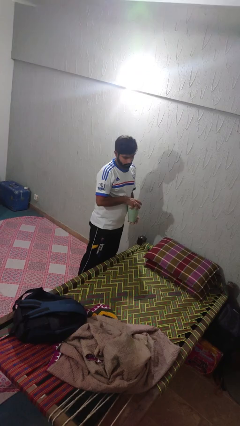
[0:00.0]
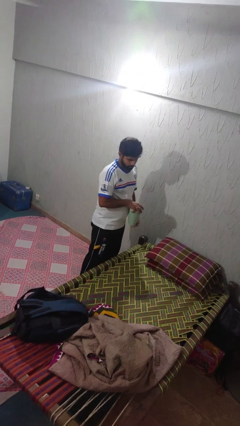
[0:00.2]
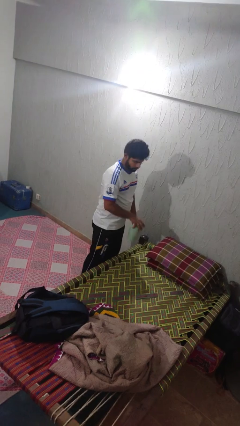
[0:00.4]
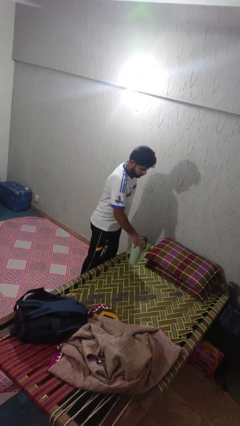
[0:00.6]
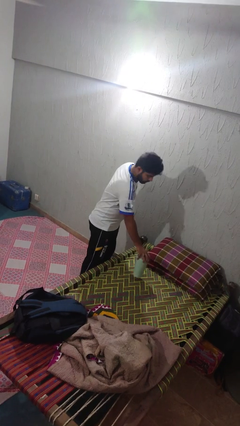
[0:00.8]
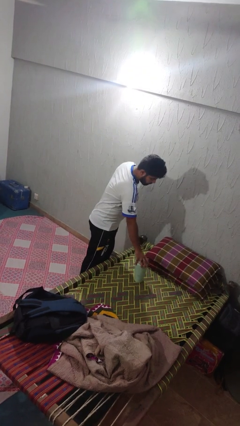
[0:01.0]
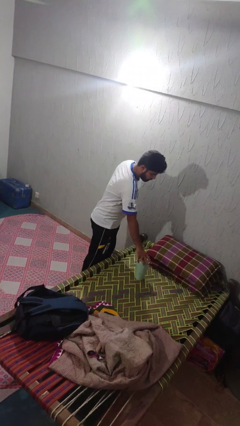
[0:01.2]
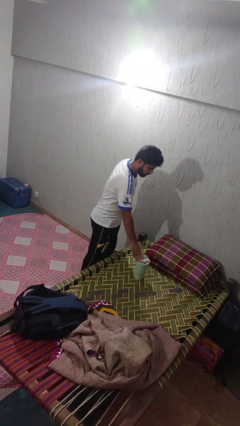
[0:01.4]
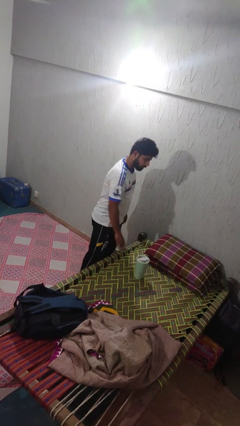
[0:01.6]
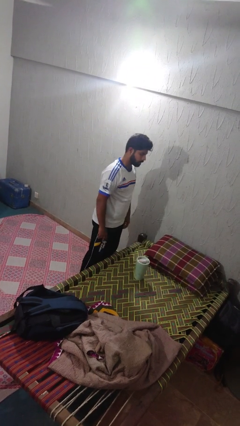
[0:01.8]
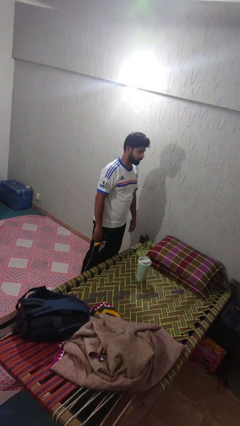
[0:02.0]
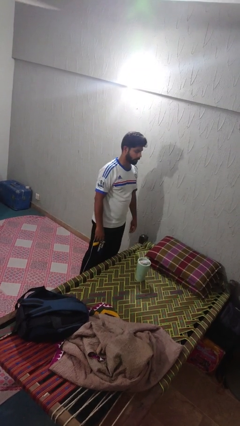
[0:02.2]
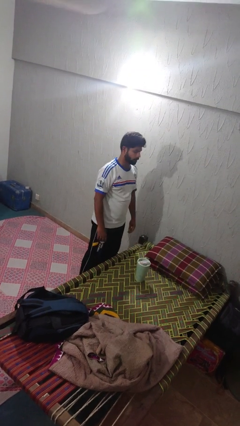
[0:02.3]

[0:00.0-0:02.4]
person puts down object on bed

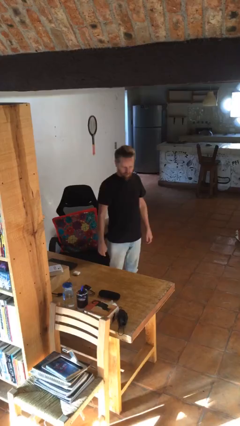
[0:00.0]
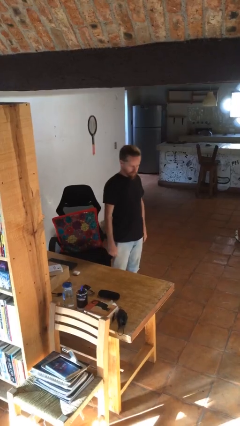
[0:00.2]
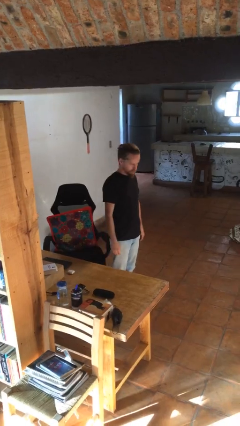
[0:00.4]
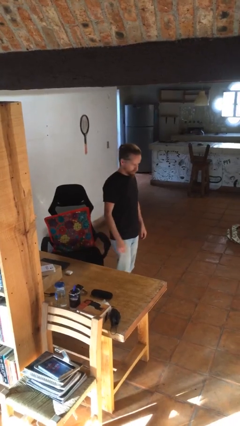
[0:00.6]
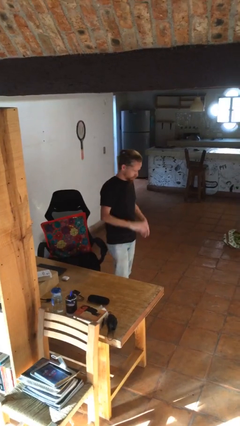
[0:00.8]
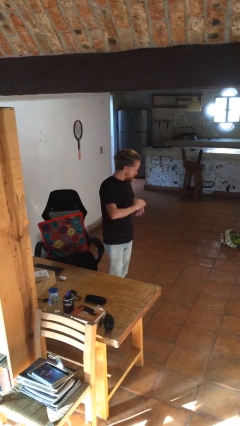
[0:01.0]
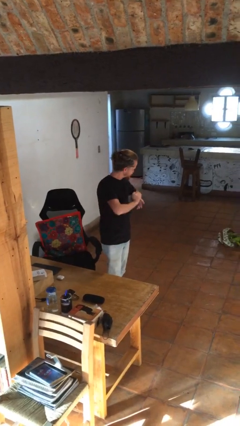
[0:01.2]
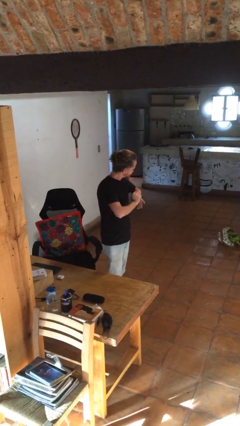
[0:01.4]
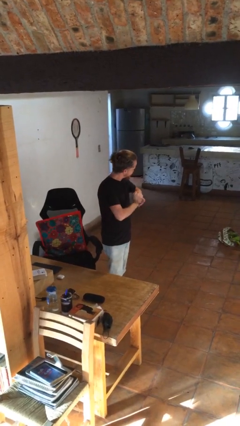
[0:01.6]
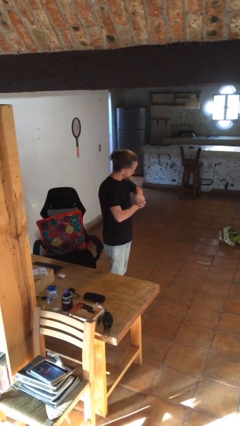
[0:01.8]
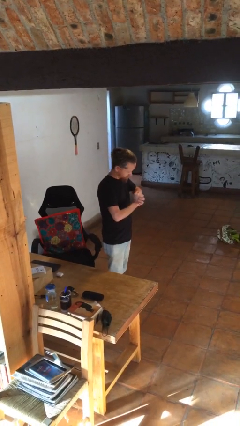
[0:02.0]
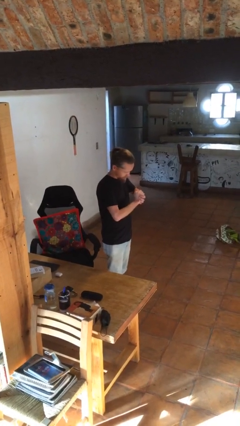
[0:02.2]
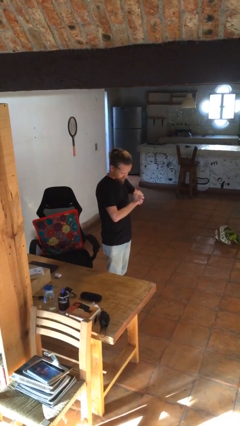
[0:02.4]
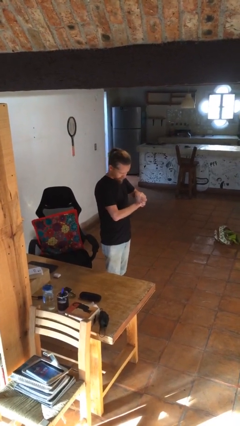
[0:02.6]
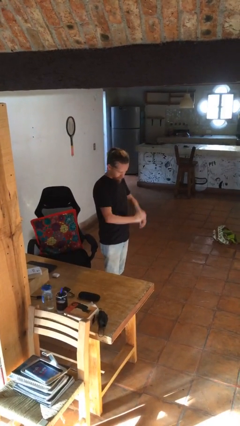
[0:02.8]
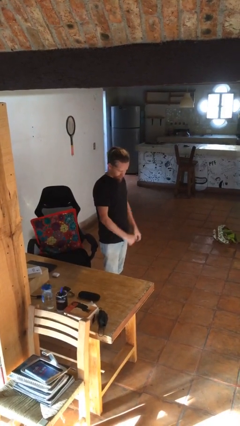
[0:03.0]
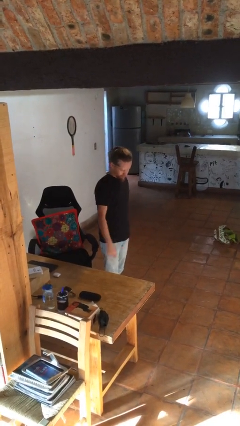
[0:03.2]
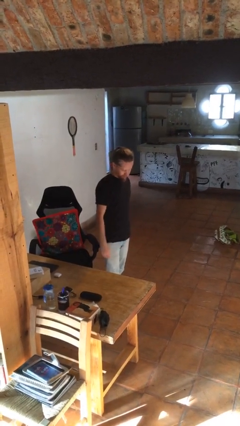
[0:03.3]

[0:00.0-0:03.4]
person cracks knuckles

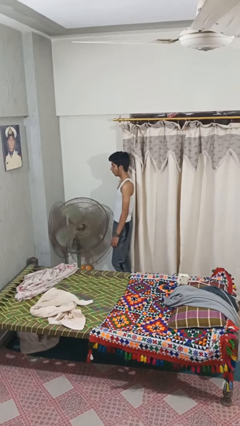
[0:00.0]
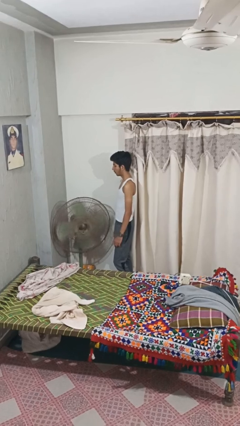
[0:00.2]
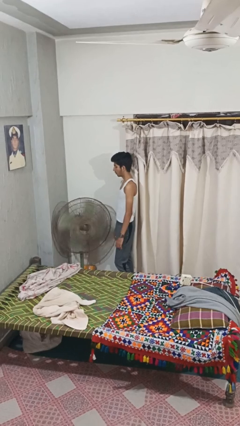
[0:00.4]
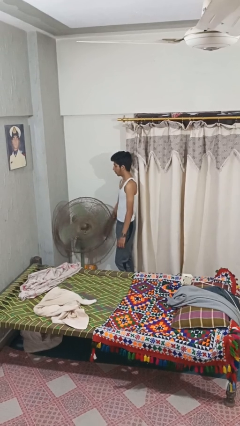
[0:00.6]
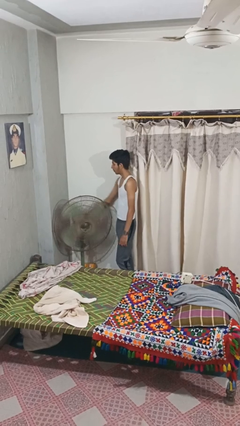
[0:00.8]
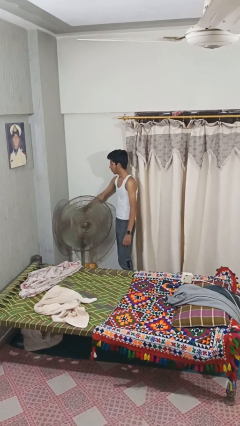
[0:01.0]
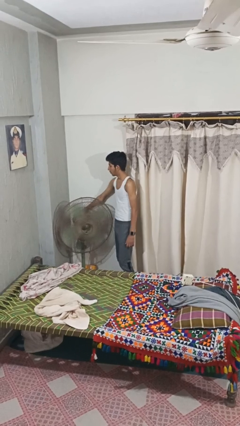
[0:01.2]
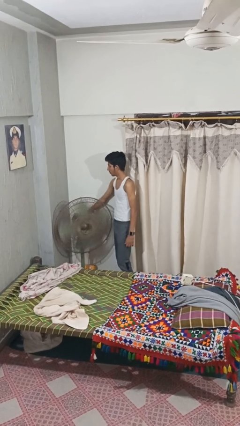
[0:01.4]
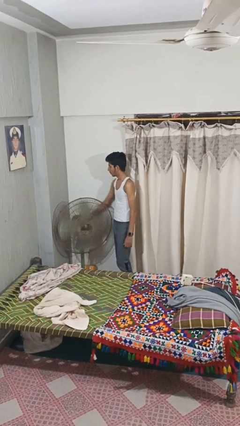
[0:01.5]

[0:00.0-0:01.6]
person turns off fan

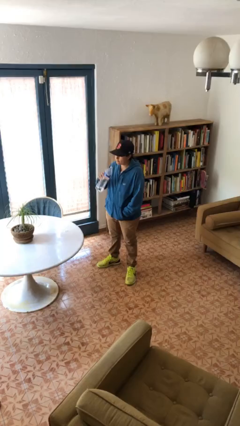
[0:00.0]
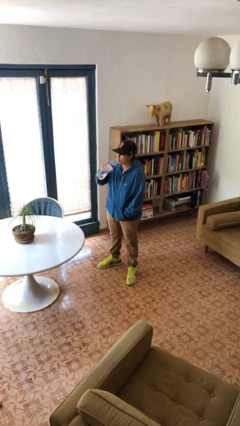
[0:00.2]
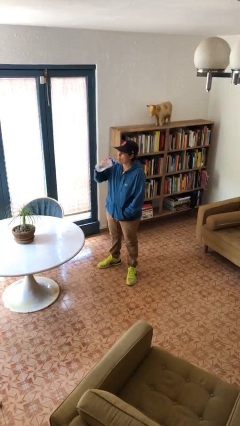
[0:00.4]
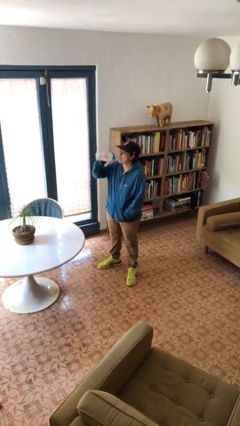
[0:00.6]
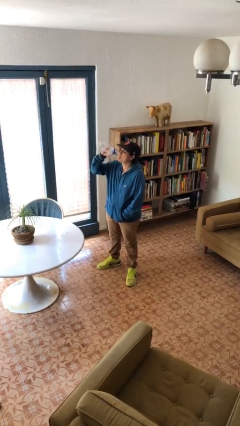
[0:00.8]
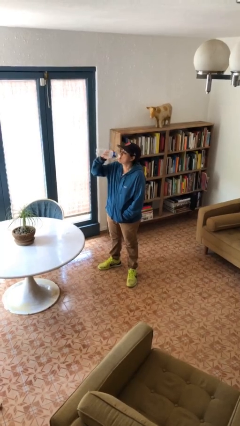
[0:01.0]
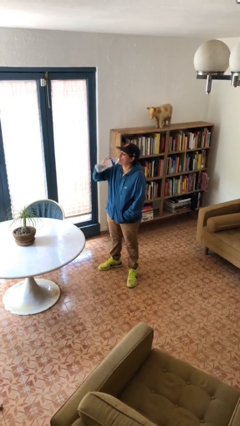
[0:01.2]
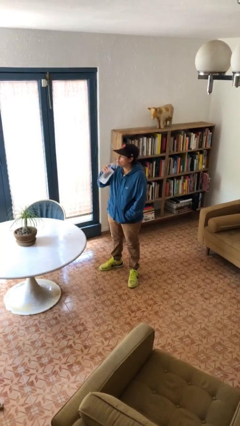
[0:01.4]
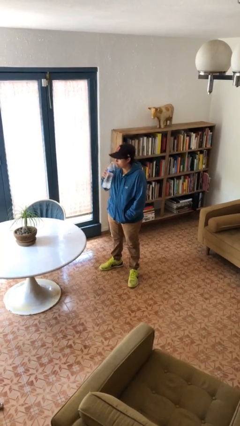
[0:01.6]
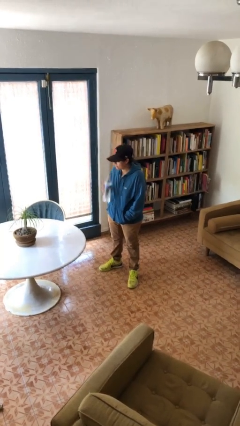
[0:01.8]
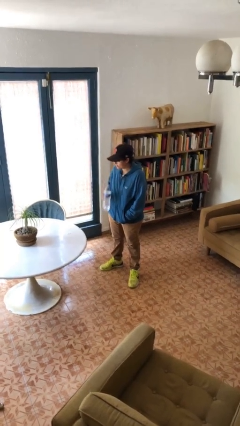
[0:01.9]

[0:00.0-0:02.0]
person drinks from bottle

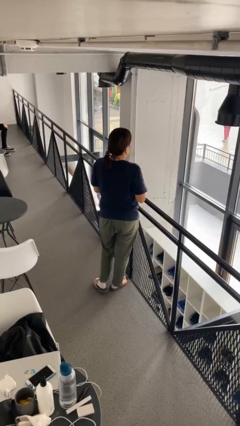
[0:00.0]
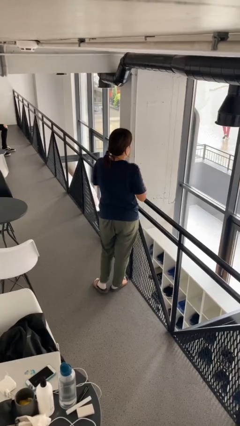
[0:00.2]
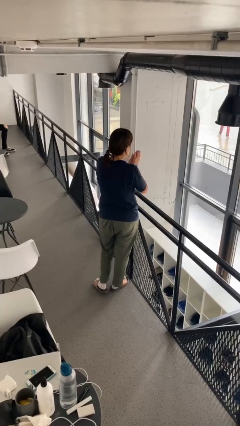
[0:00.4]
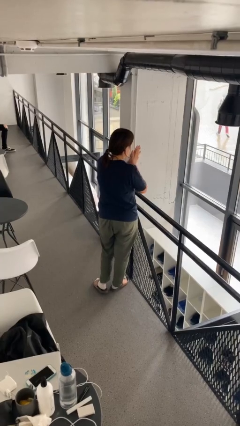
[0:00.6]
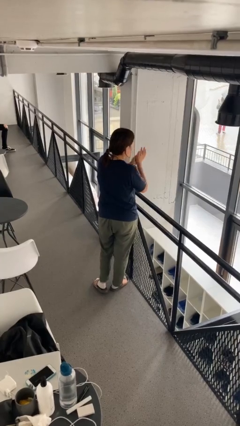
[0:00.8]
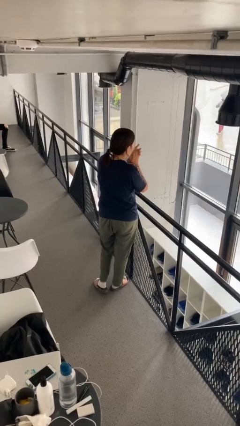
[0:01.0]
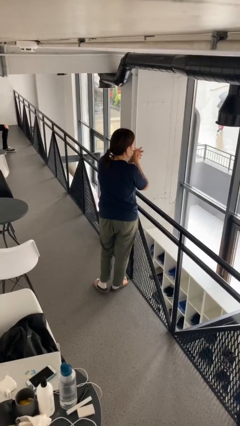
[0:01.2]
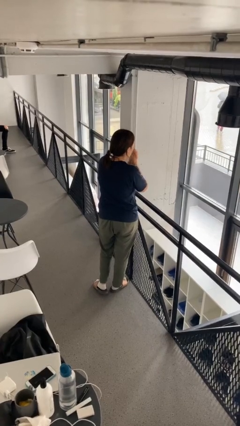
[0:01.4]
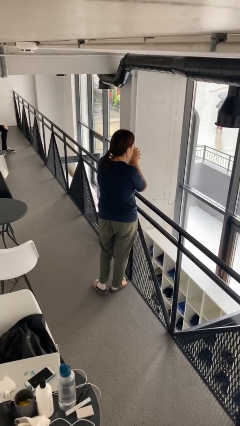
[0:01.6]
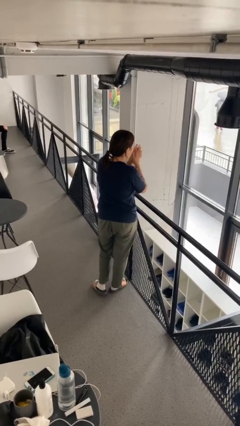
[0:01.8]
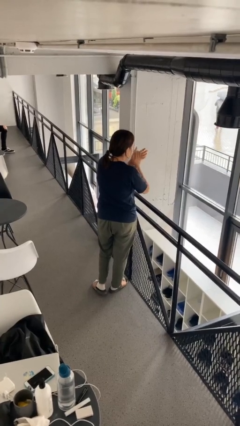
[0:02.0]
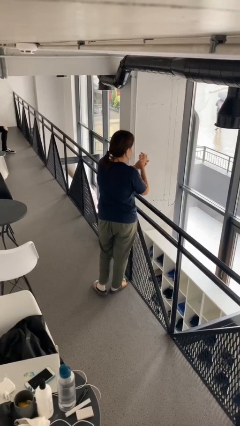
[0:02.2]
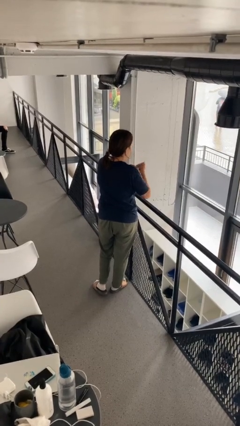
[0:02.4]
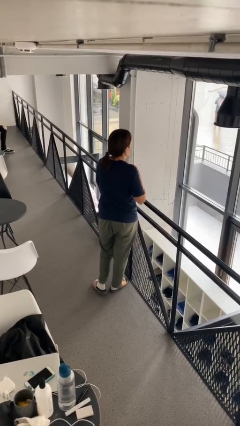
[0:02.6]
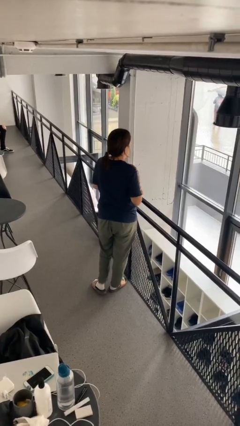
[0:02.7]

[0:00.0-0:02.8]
person blows into hands

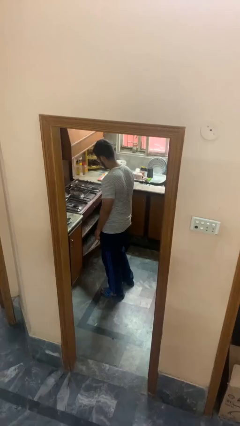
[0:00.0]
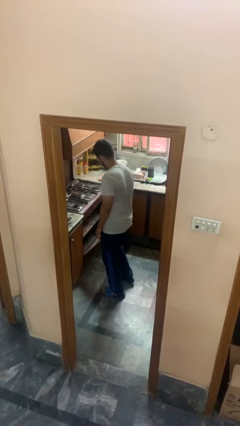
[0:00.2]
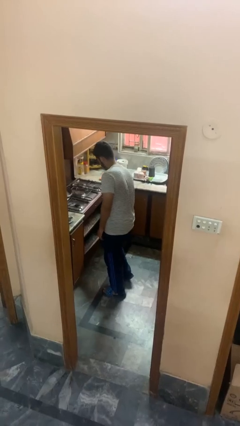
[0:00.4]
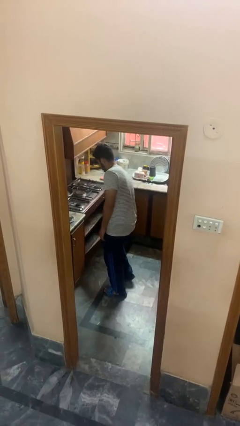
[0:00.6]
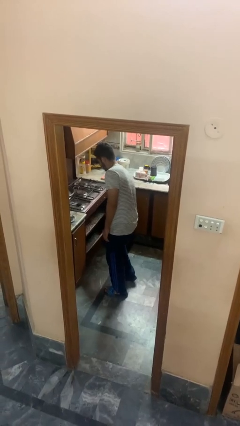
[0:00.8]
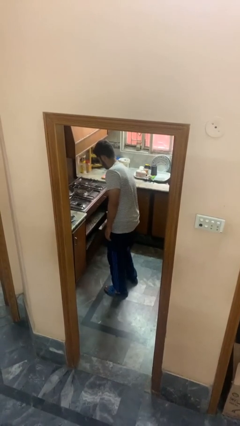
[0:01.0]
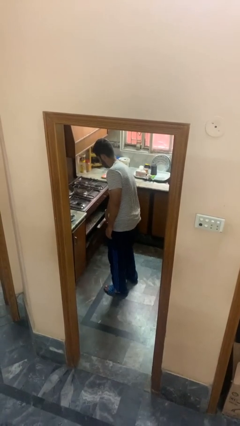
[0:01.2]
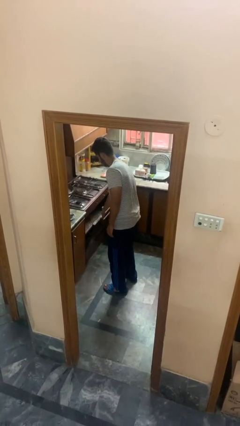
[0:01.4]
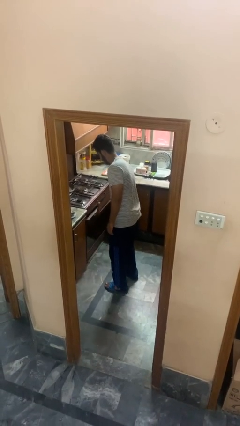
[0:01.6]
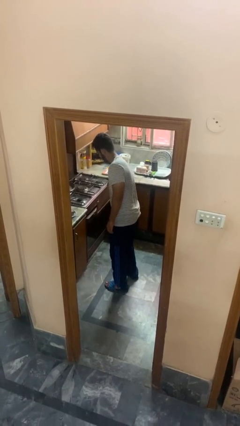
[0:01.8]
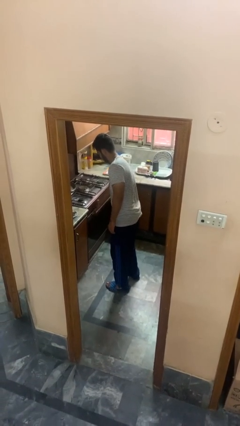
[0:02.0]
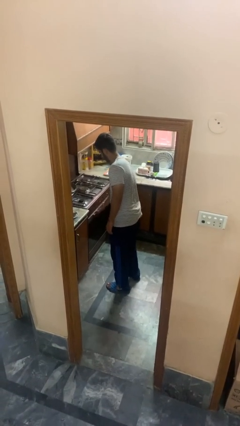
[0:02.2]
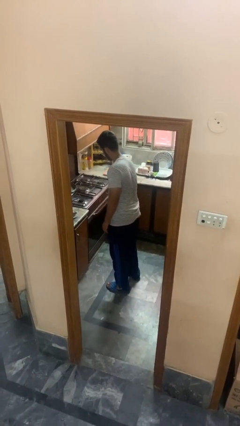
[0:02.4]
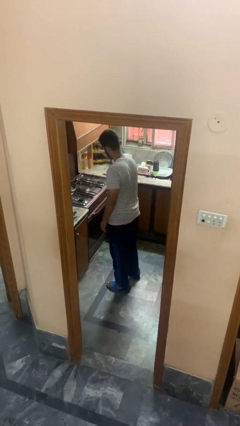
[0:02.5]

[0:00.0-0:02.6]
person closes oven door

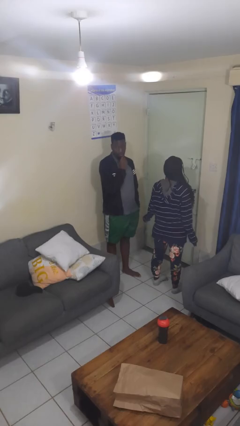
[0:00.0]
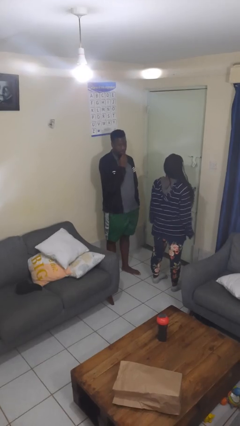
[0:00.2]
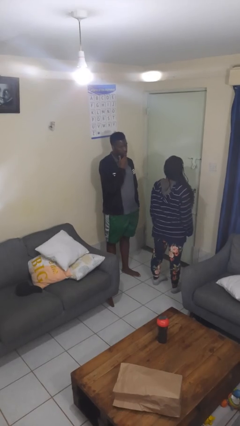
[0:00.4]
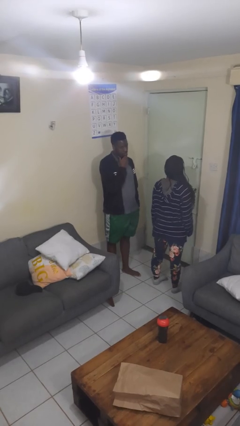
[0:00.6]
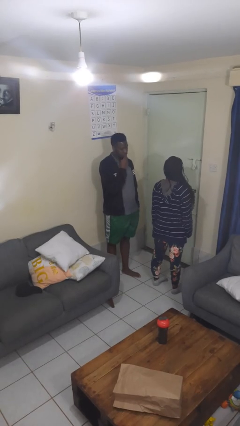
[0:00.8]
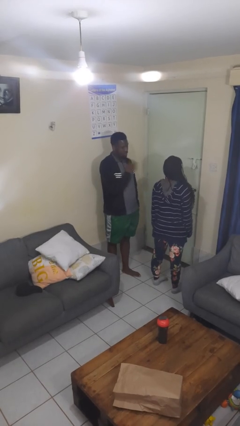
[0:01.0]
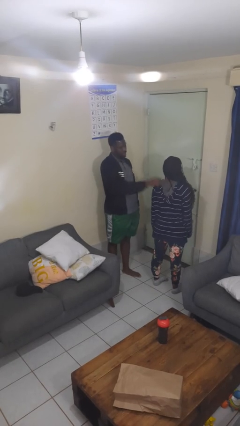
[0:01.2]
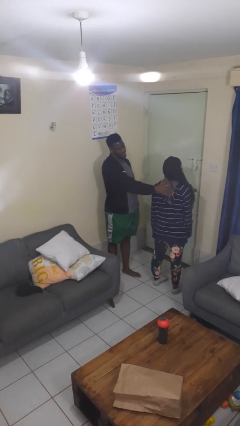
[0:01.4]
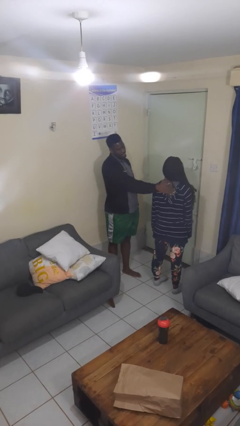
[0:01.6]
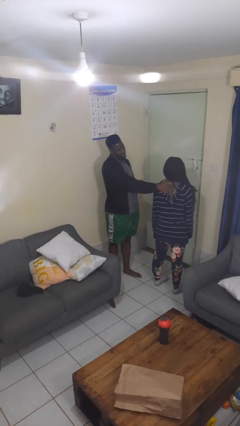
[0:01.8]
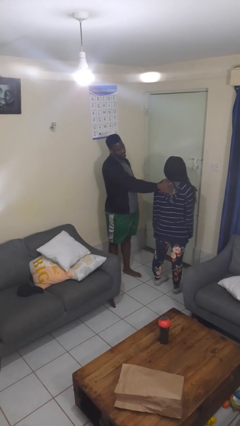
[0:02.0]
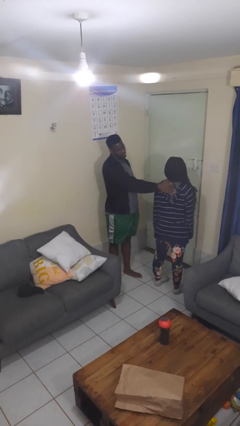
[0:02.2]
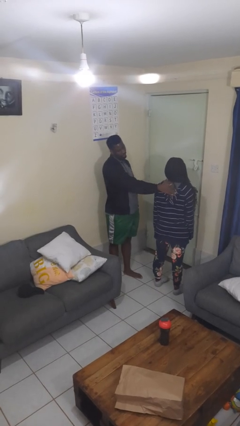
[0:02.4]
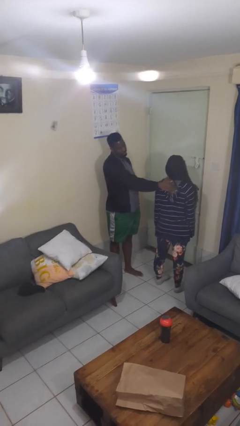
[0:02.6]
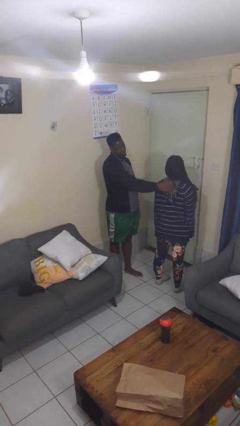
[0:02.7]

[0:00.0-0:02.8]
person touches back of person
